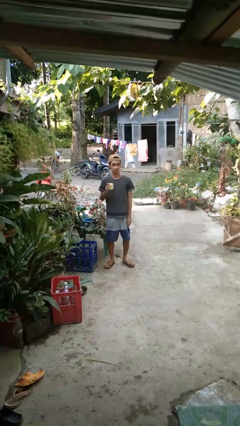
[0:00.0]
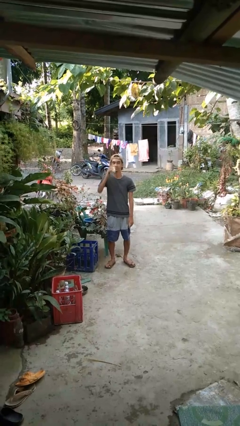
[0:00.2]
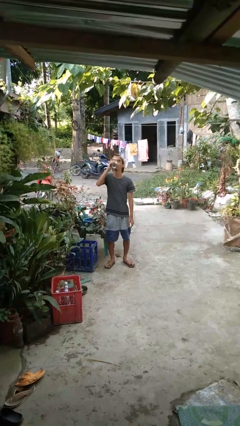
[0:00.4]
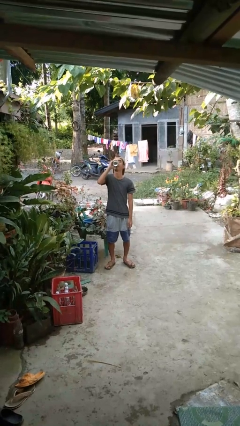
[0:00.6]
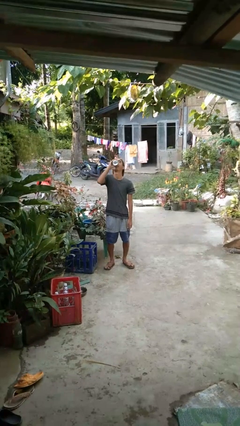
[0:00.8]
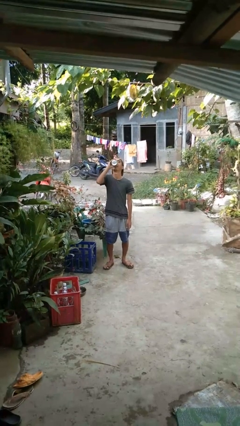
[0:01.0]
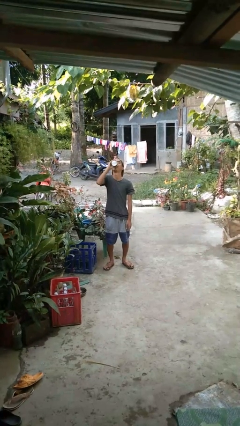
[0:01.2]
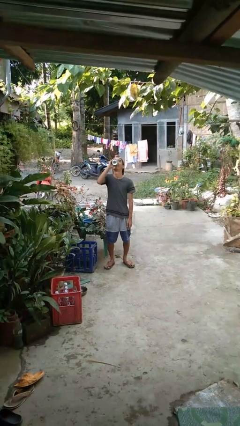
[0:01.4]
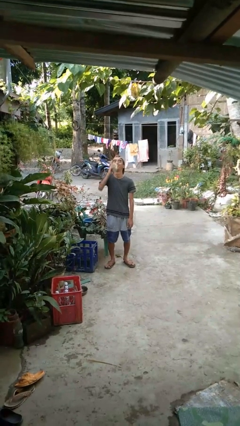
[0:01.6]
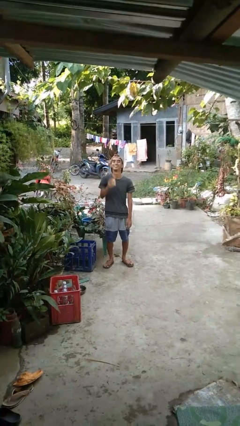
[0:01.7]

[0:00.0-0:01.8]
person drinks from beverage can

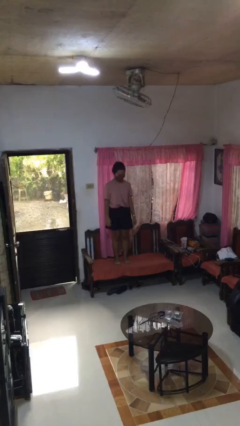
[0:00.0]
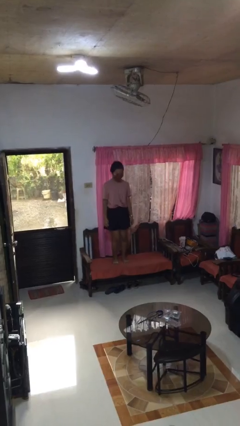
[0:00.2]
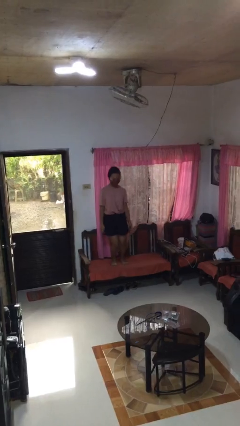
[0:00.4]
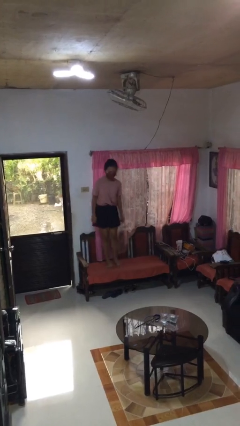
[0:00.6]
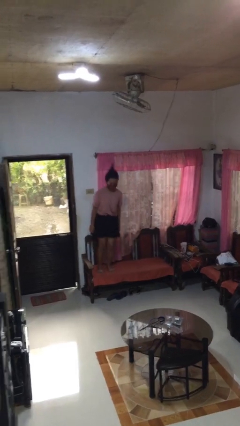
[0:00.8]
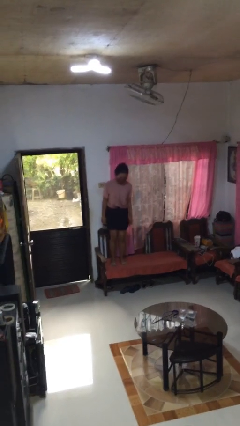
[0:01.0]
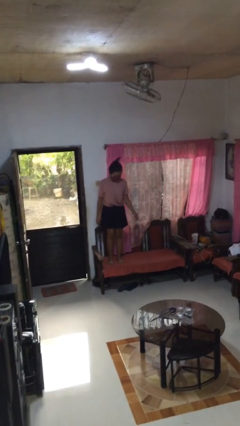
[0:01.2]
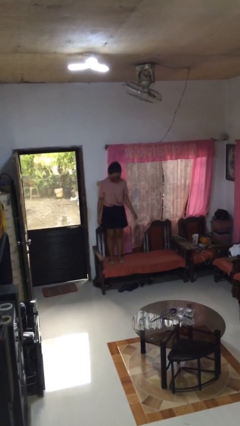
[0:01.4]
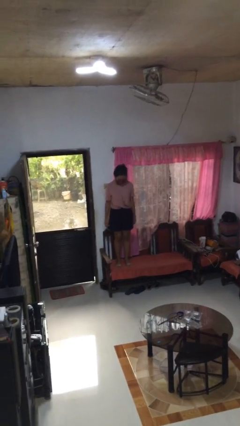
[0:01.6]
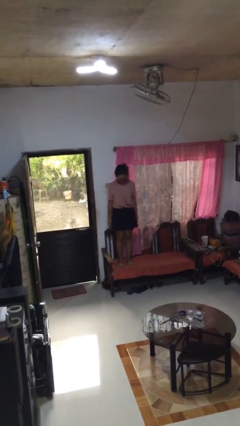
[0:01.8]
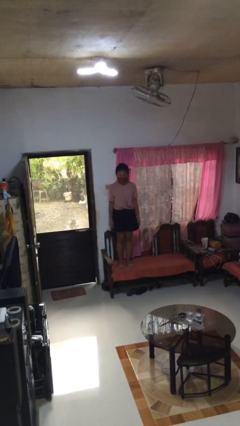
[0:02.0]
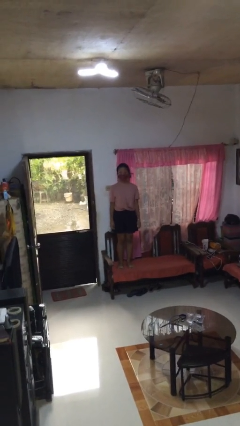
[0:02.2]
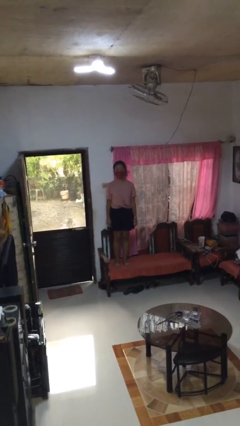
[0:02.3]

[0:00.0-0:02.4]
person jumps on couch

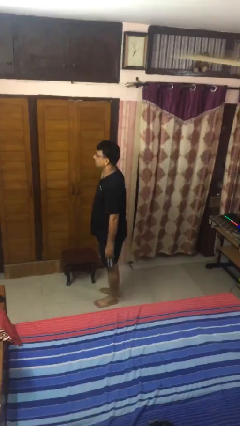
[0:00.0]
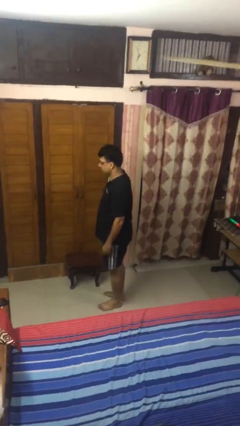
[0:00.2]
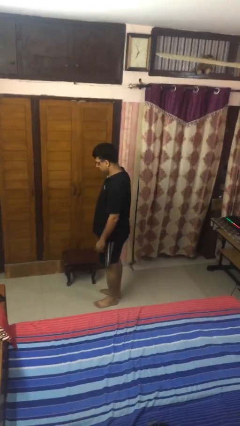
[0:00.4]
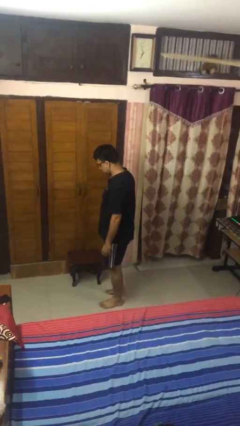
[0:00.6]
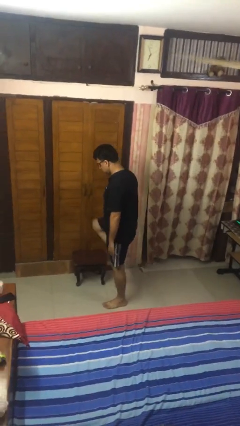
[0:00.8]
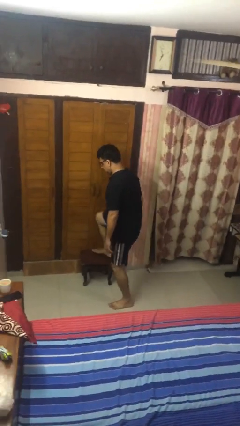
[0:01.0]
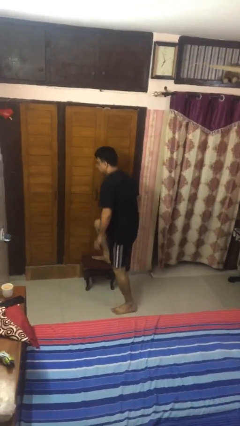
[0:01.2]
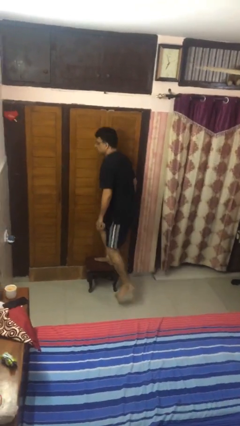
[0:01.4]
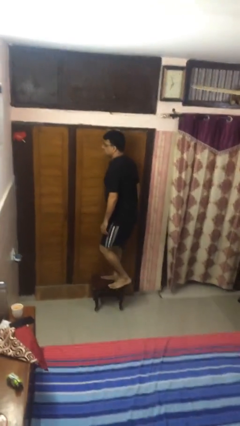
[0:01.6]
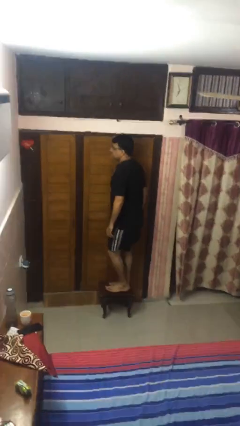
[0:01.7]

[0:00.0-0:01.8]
person climbs on table

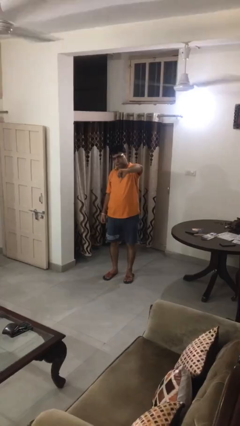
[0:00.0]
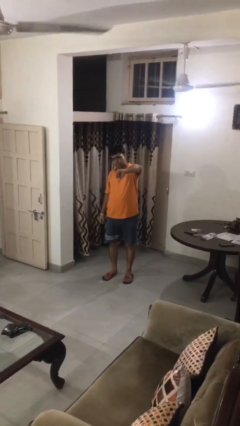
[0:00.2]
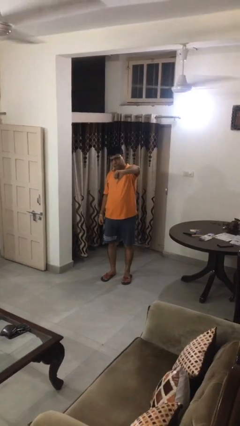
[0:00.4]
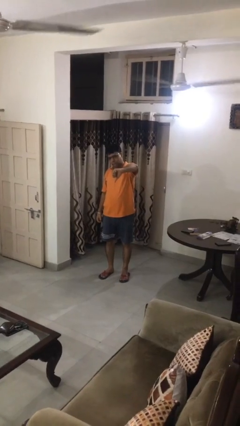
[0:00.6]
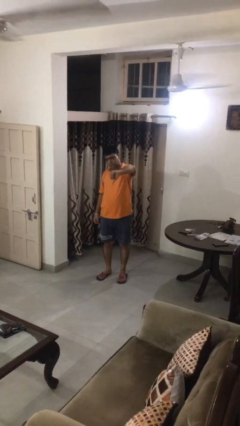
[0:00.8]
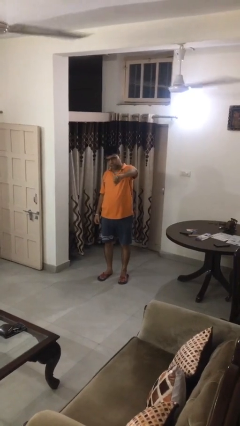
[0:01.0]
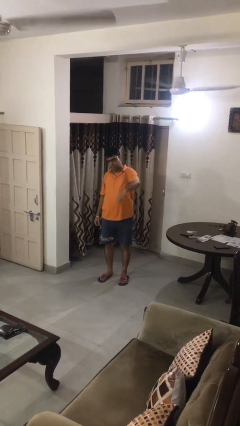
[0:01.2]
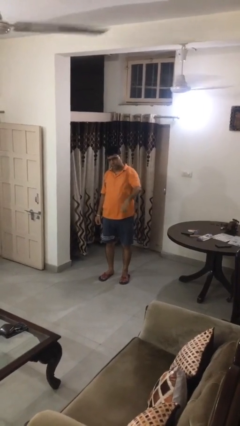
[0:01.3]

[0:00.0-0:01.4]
person gestures thumbs down

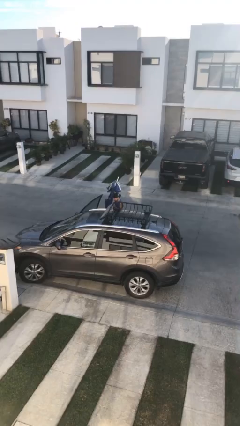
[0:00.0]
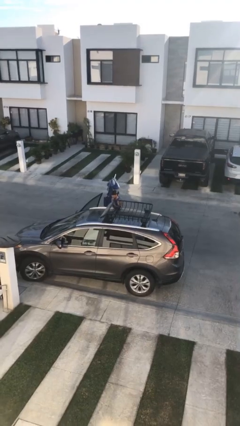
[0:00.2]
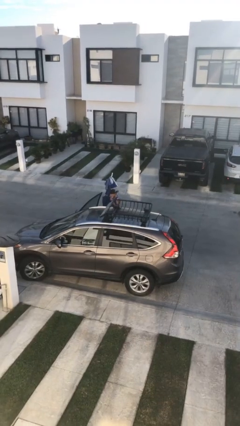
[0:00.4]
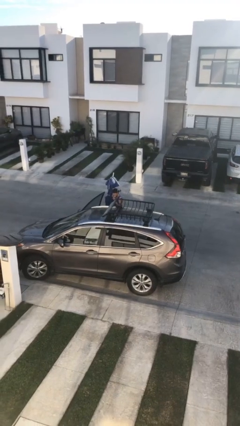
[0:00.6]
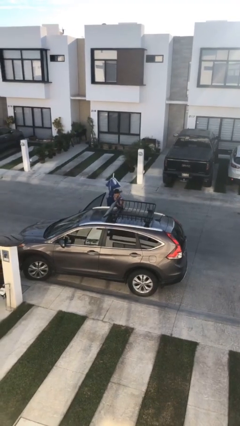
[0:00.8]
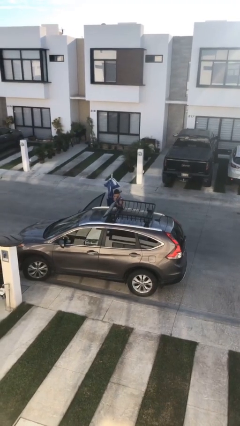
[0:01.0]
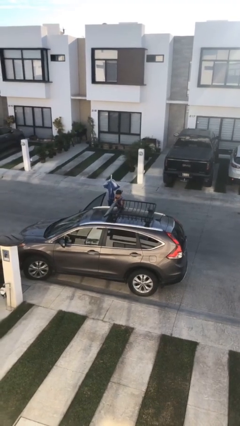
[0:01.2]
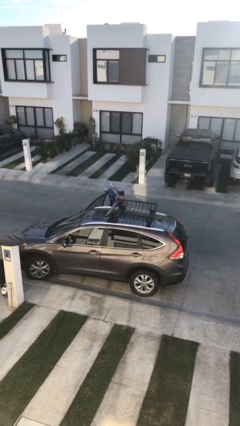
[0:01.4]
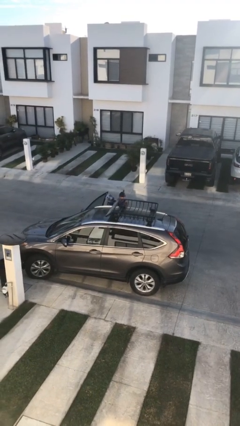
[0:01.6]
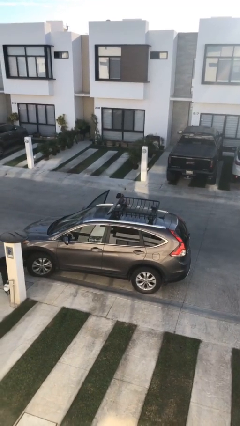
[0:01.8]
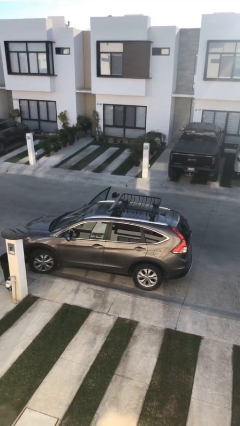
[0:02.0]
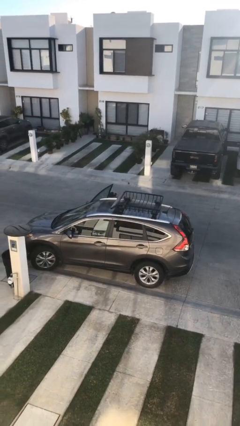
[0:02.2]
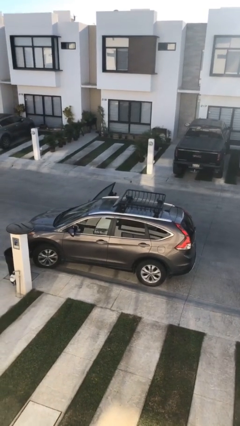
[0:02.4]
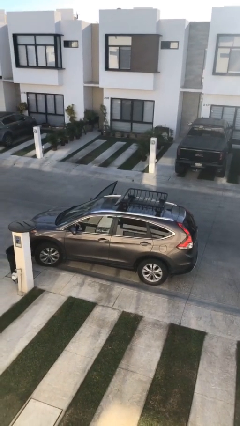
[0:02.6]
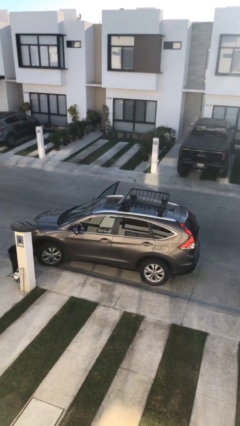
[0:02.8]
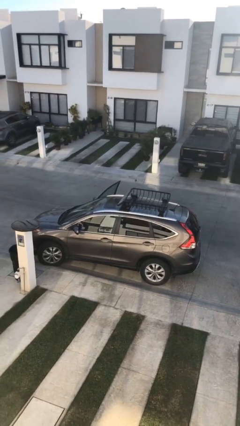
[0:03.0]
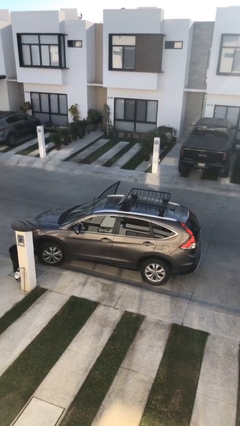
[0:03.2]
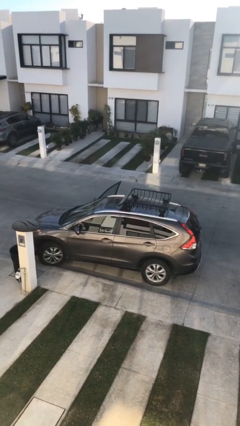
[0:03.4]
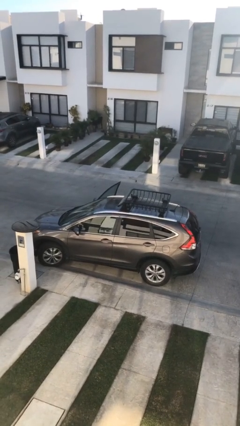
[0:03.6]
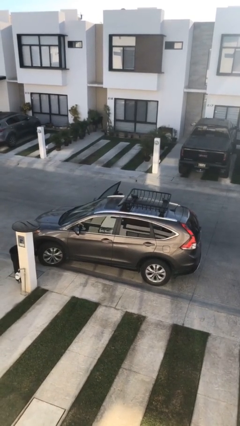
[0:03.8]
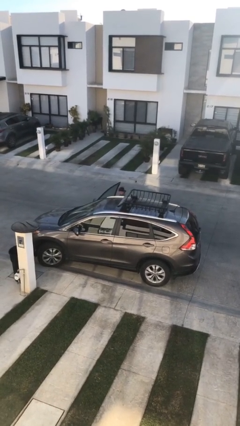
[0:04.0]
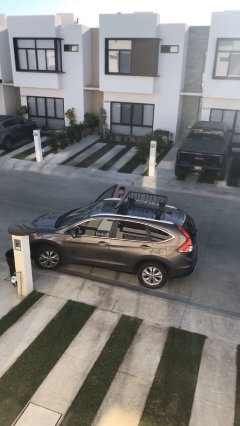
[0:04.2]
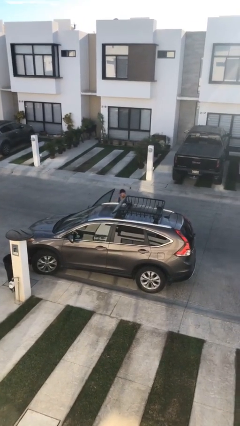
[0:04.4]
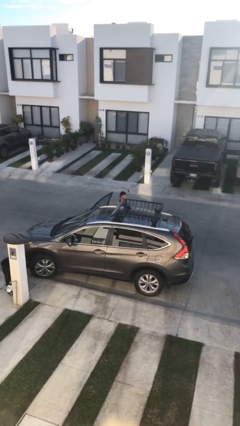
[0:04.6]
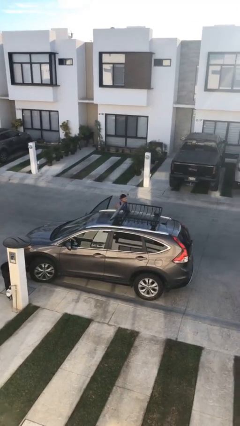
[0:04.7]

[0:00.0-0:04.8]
person loads car

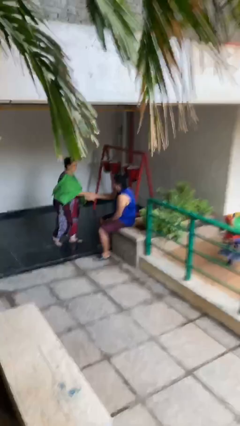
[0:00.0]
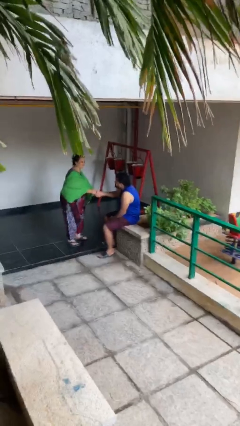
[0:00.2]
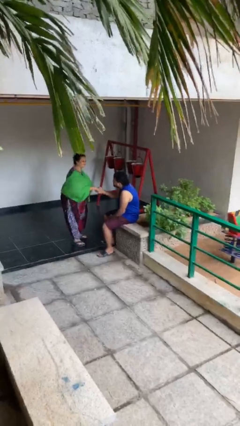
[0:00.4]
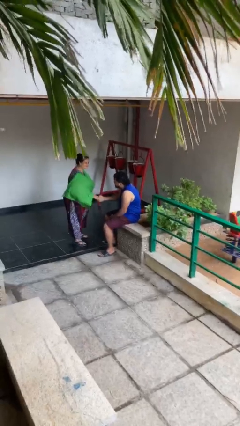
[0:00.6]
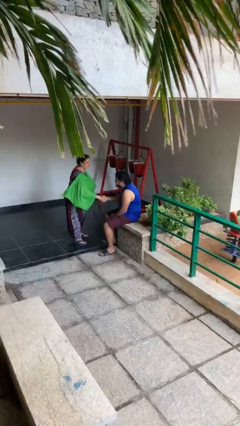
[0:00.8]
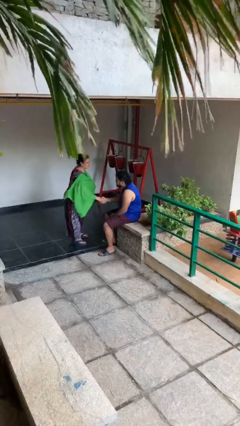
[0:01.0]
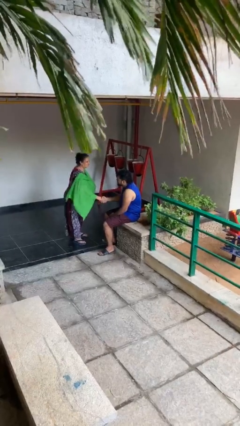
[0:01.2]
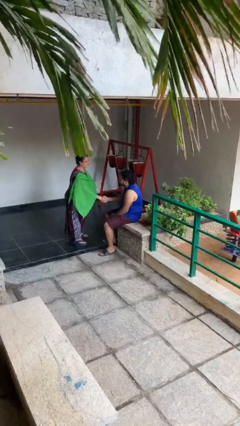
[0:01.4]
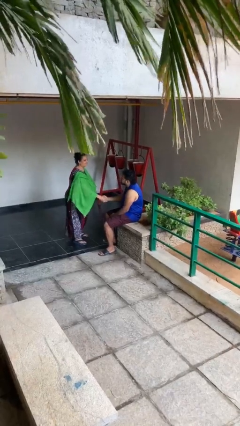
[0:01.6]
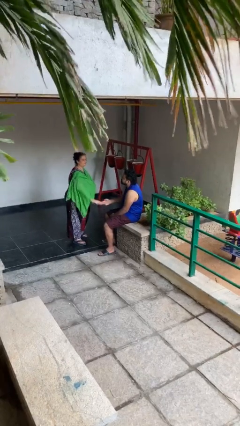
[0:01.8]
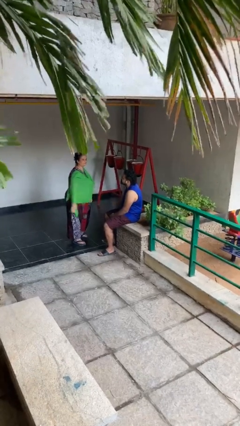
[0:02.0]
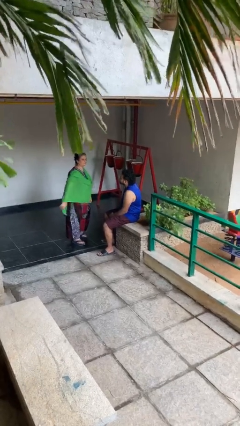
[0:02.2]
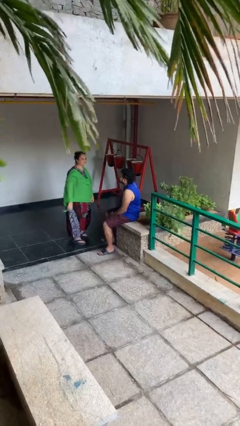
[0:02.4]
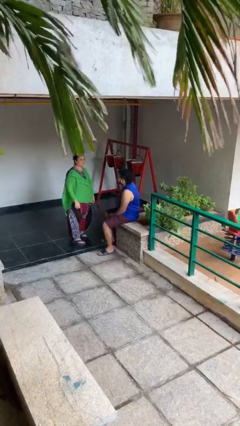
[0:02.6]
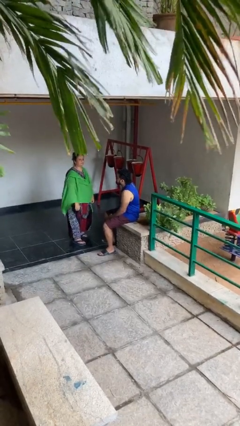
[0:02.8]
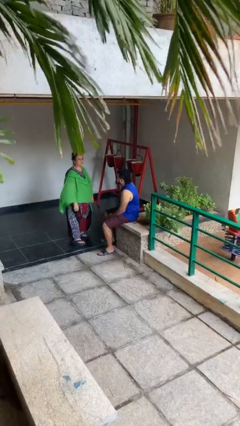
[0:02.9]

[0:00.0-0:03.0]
person shakes hand

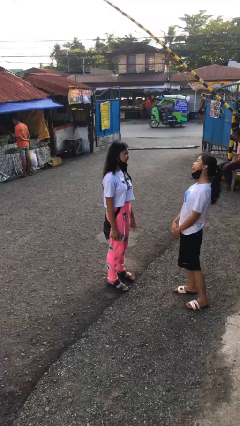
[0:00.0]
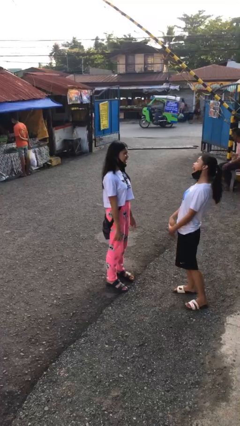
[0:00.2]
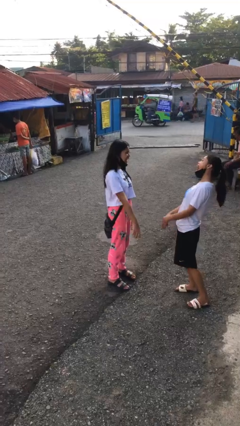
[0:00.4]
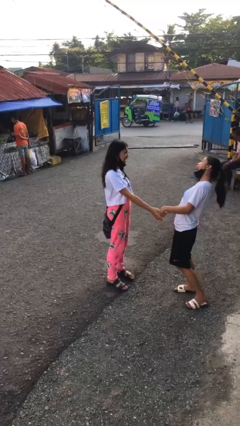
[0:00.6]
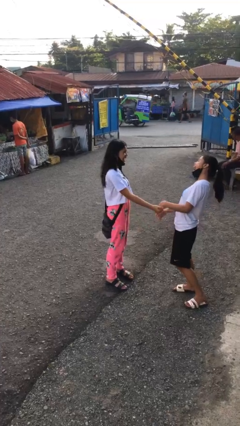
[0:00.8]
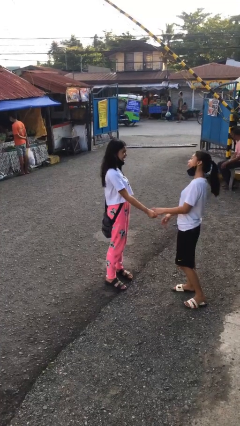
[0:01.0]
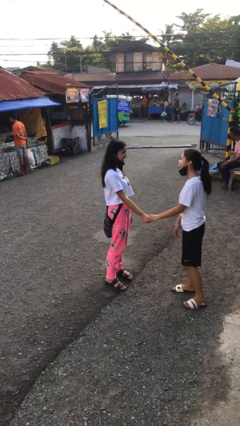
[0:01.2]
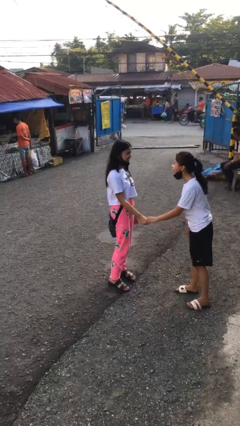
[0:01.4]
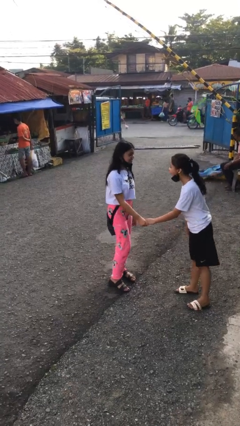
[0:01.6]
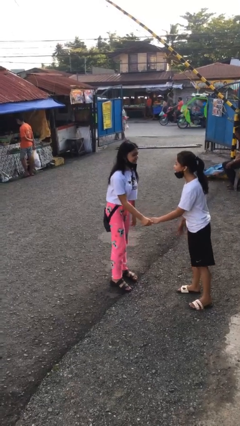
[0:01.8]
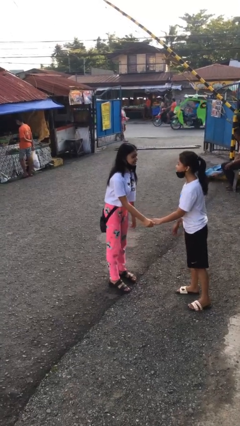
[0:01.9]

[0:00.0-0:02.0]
person laughs with person
